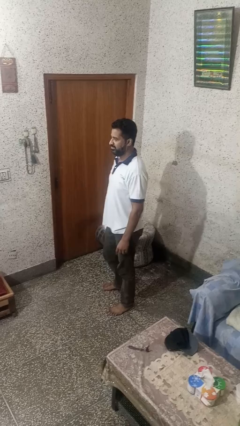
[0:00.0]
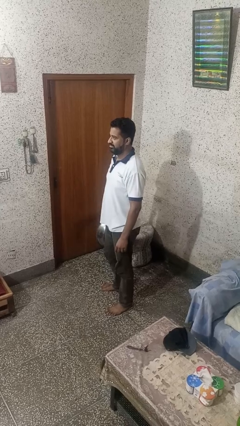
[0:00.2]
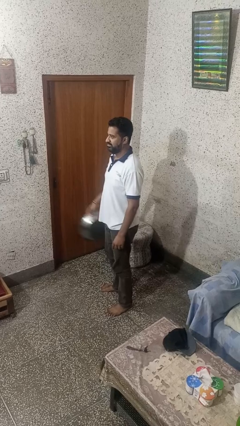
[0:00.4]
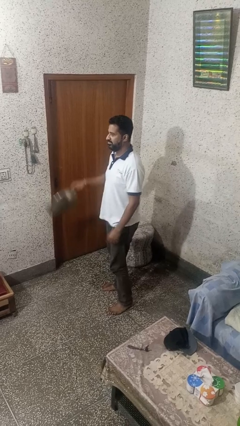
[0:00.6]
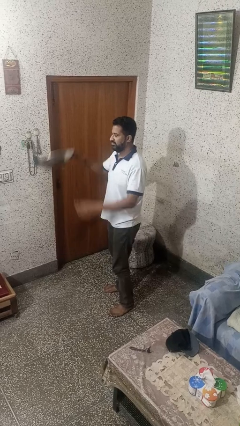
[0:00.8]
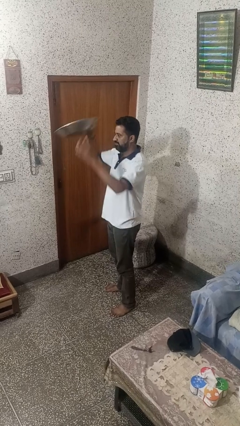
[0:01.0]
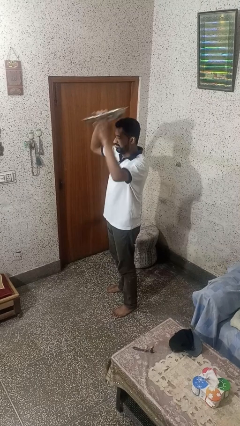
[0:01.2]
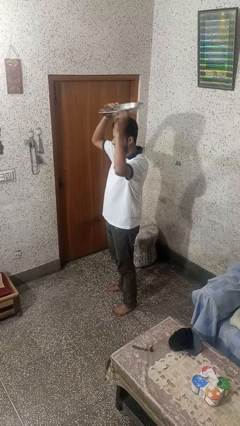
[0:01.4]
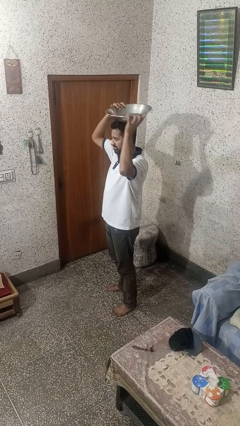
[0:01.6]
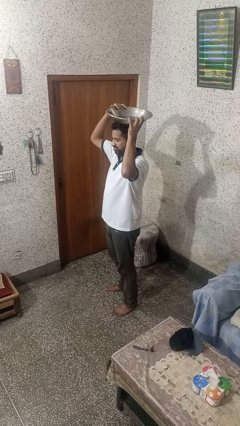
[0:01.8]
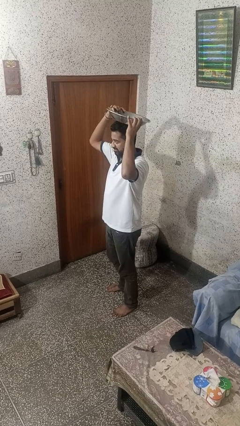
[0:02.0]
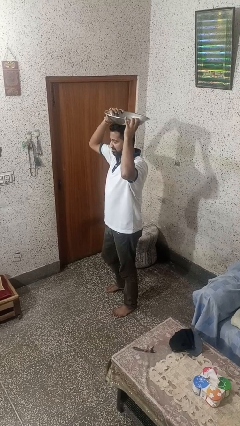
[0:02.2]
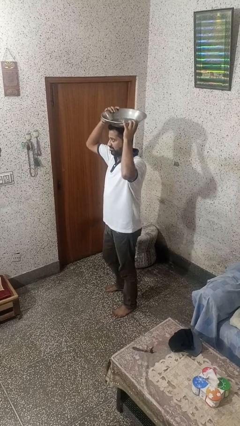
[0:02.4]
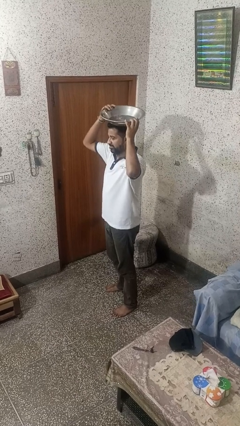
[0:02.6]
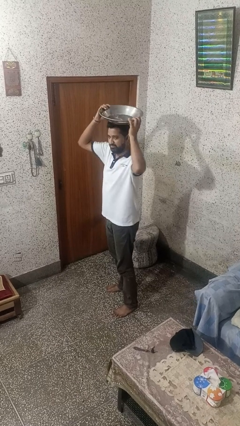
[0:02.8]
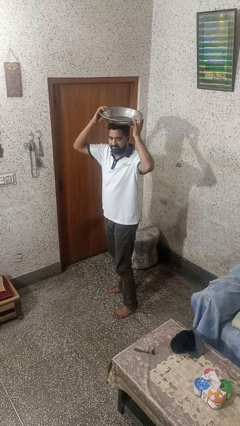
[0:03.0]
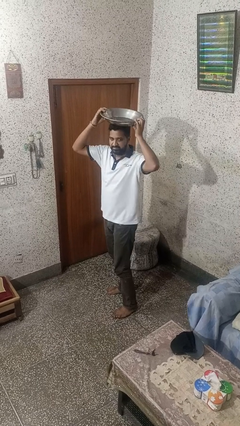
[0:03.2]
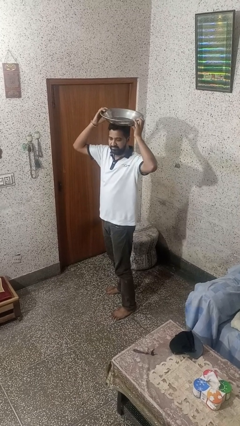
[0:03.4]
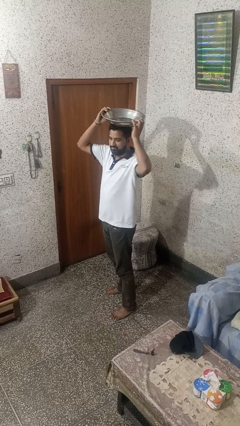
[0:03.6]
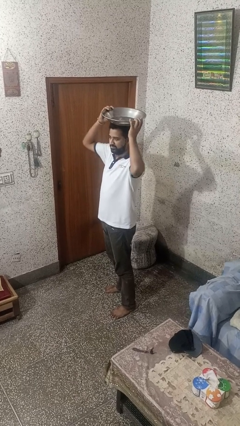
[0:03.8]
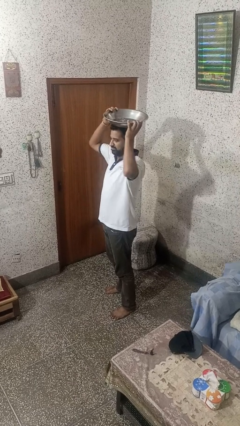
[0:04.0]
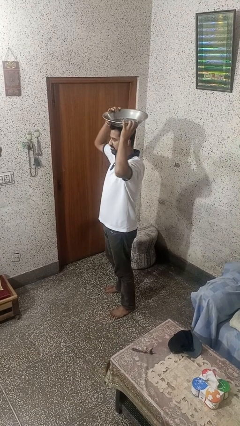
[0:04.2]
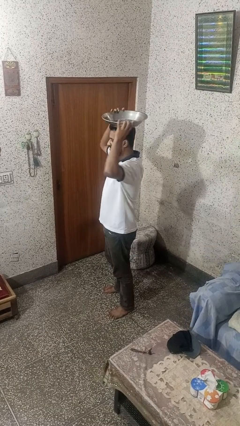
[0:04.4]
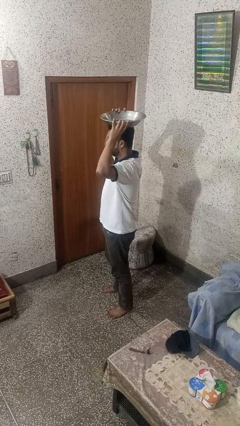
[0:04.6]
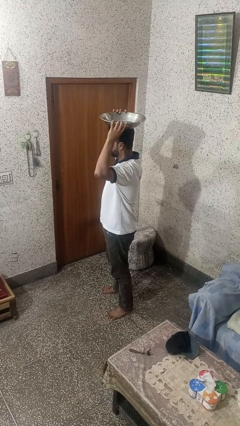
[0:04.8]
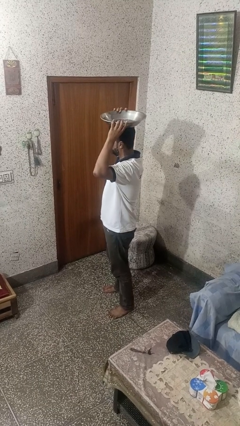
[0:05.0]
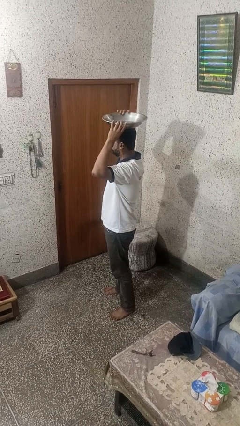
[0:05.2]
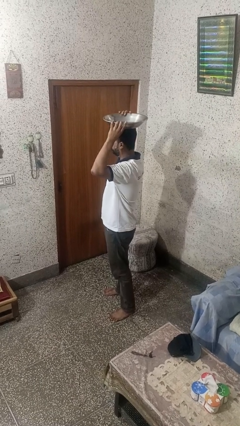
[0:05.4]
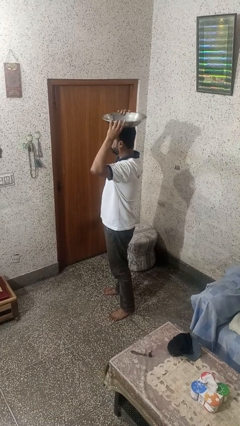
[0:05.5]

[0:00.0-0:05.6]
person holds object above head

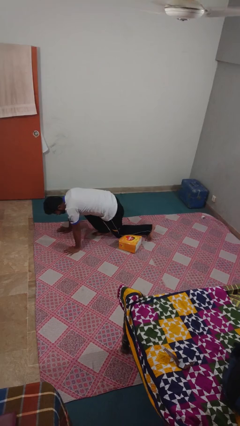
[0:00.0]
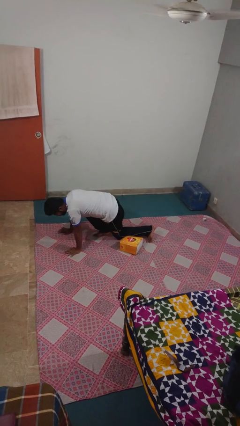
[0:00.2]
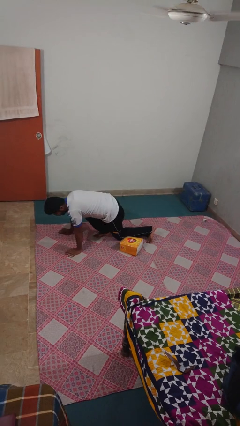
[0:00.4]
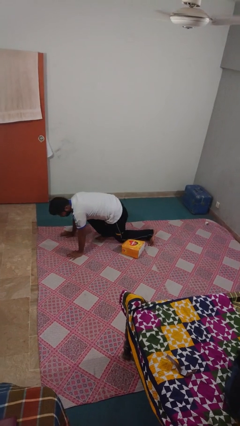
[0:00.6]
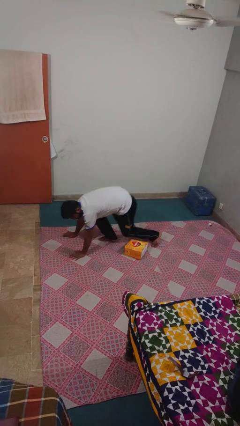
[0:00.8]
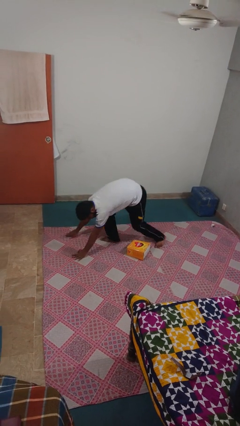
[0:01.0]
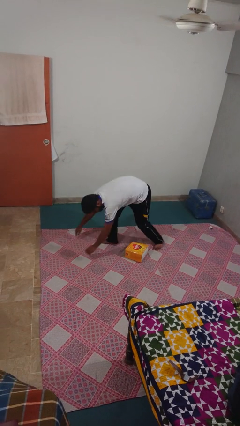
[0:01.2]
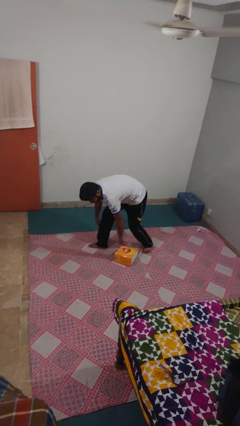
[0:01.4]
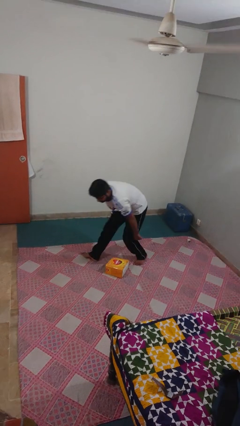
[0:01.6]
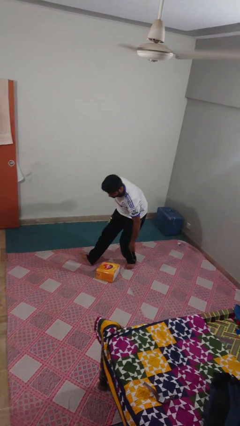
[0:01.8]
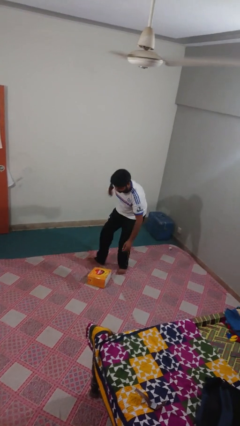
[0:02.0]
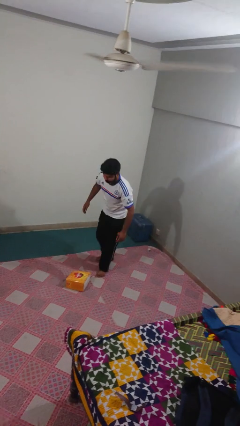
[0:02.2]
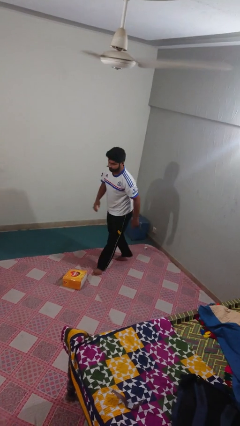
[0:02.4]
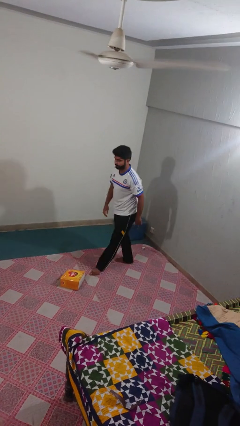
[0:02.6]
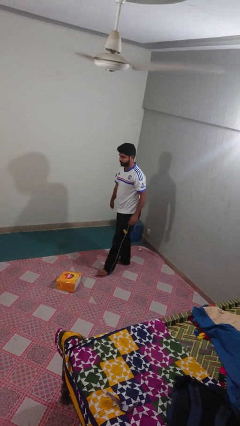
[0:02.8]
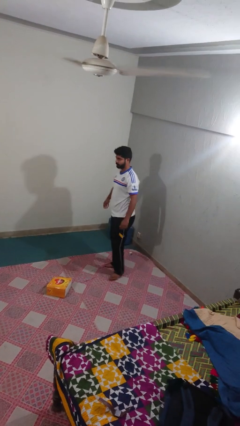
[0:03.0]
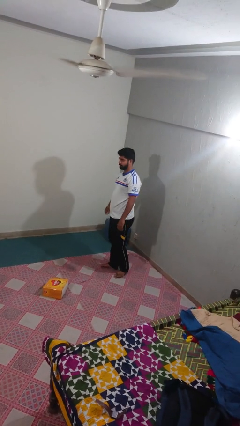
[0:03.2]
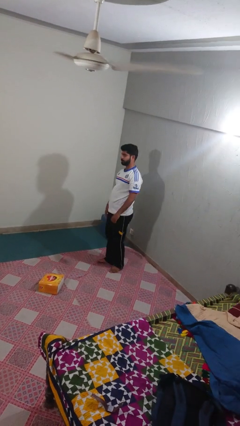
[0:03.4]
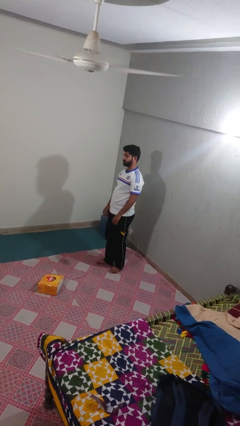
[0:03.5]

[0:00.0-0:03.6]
person stands up from floor

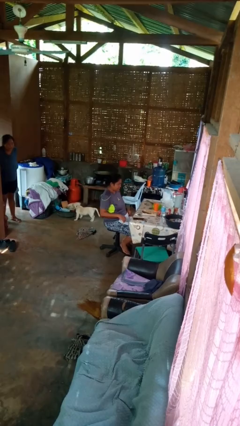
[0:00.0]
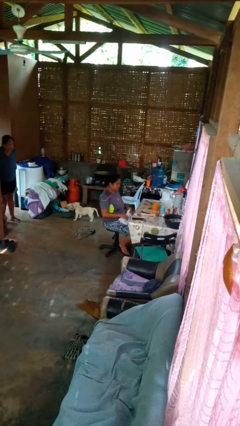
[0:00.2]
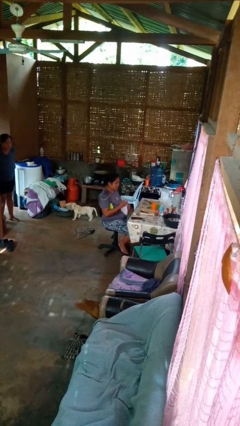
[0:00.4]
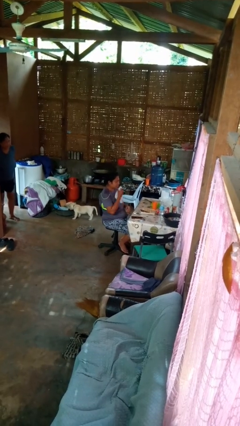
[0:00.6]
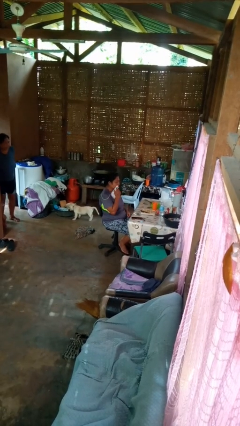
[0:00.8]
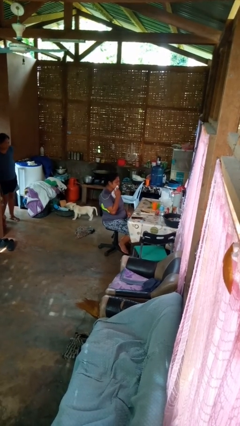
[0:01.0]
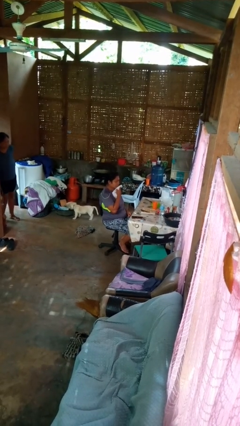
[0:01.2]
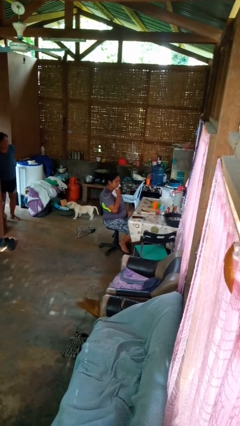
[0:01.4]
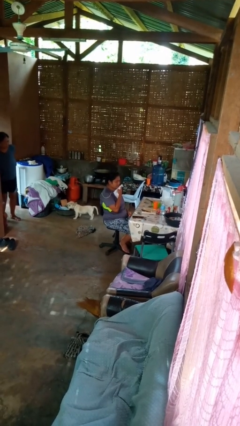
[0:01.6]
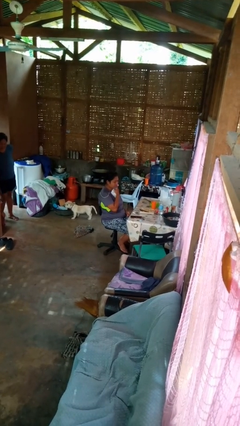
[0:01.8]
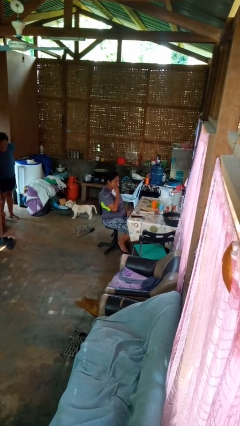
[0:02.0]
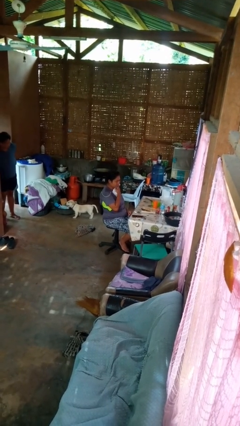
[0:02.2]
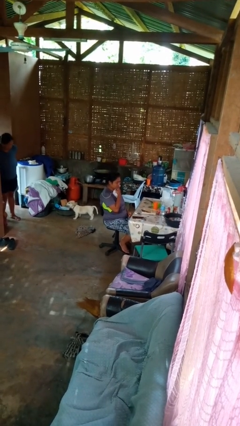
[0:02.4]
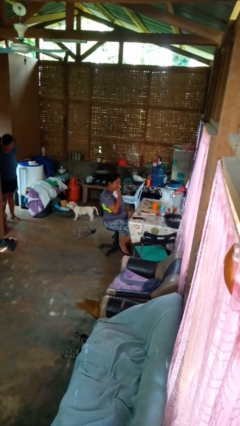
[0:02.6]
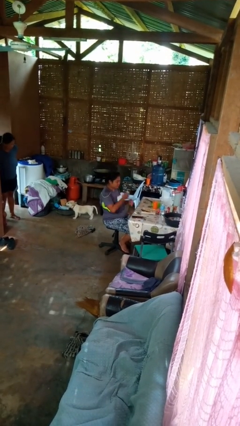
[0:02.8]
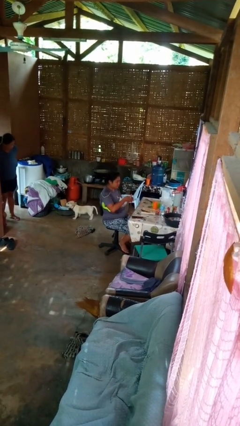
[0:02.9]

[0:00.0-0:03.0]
person wipes mouth with napkin

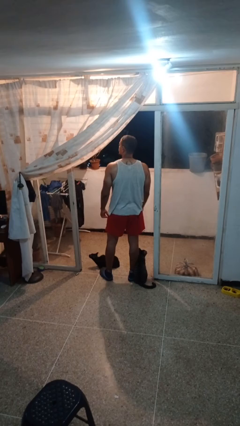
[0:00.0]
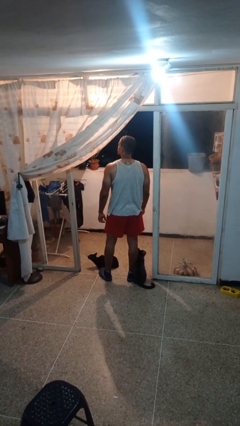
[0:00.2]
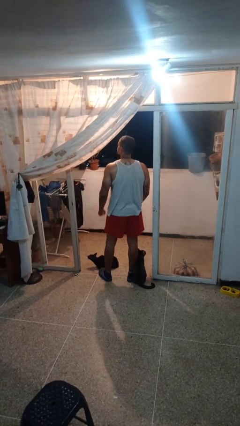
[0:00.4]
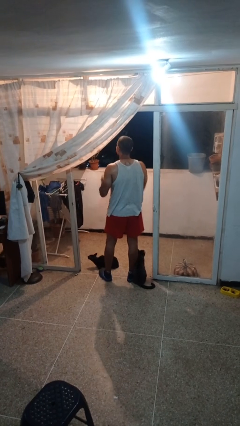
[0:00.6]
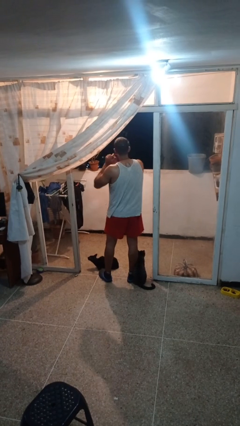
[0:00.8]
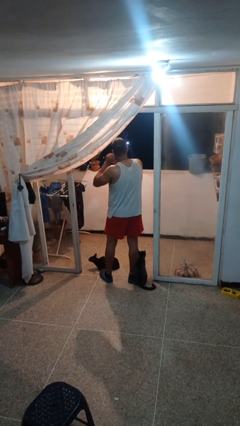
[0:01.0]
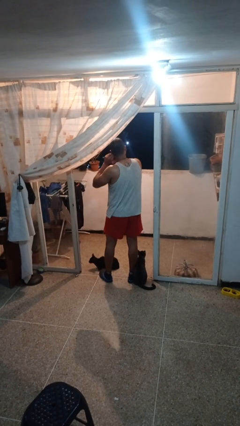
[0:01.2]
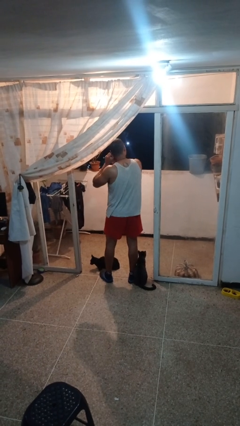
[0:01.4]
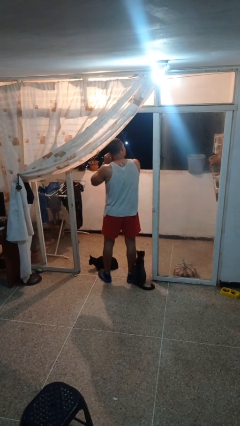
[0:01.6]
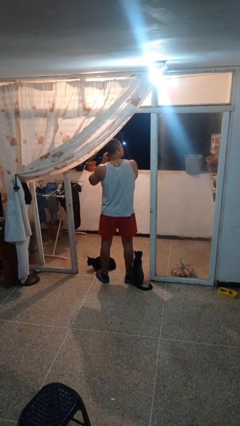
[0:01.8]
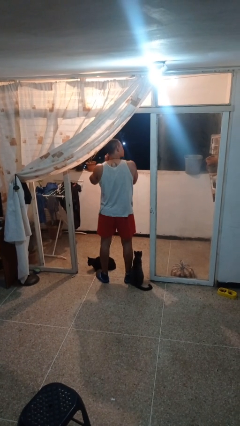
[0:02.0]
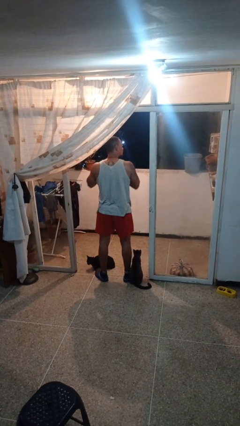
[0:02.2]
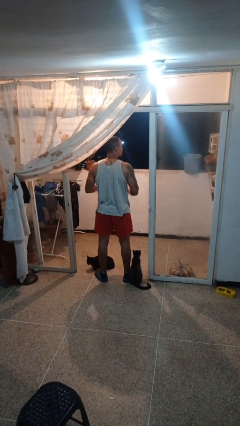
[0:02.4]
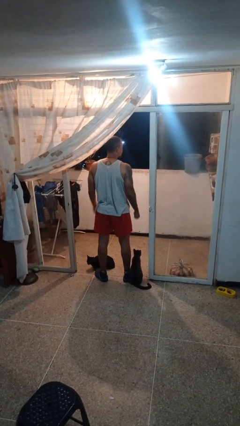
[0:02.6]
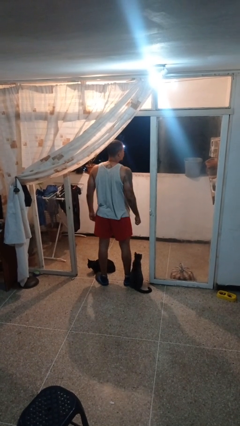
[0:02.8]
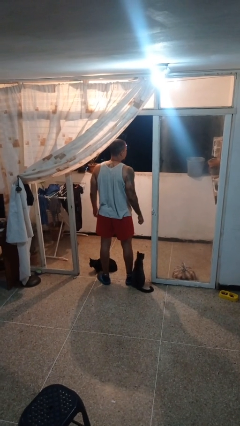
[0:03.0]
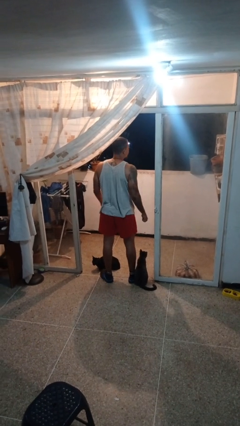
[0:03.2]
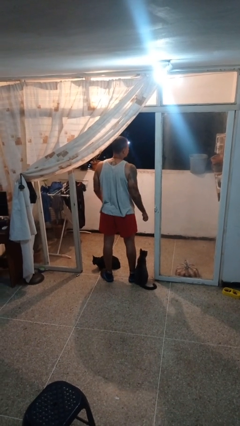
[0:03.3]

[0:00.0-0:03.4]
person takes off earrings

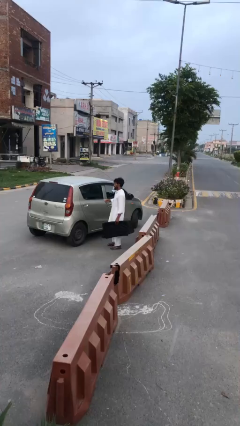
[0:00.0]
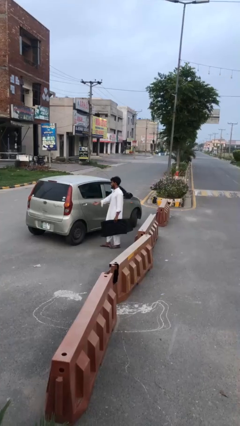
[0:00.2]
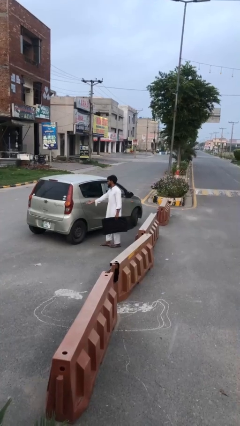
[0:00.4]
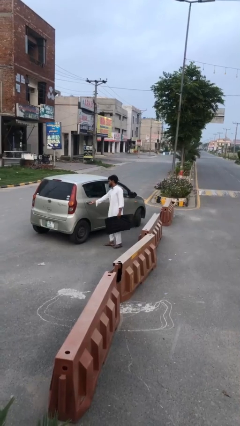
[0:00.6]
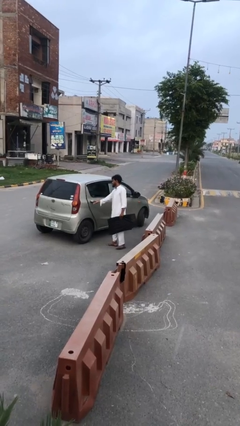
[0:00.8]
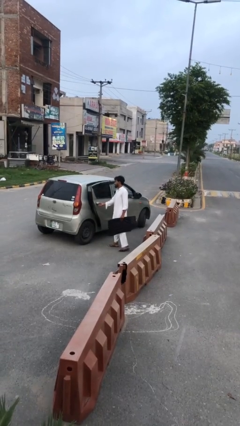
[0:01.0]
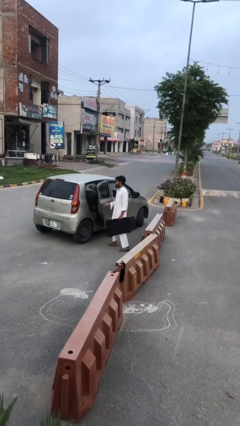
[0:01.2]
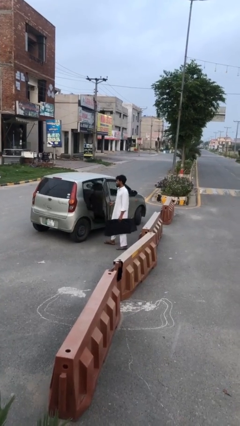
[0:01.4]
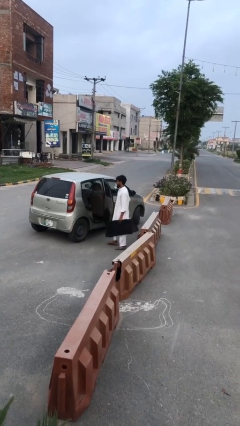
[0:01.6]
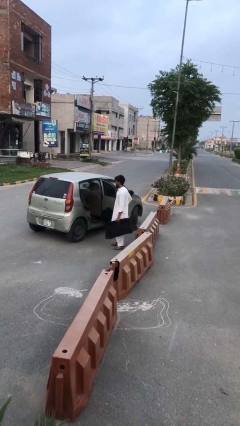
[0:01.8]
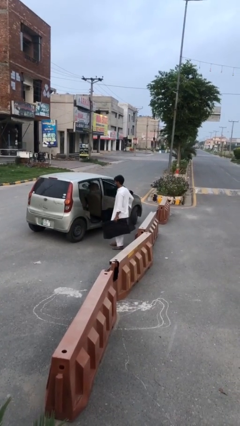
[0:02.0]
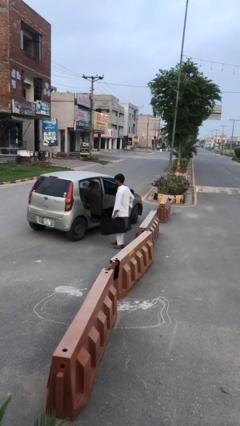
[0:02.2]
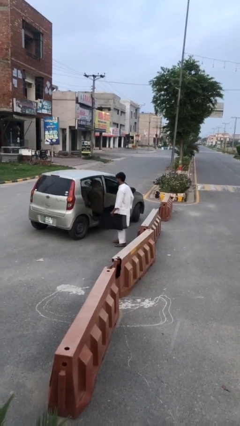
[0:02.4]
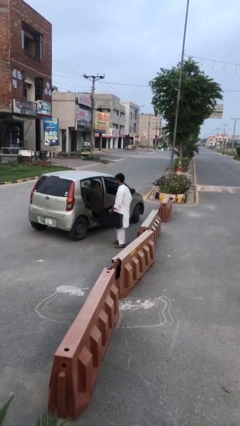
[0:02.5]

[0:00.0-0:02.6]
person opens car door
